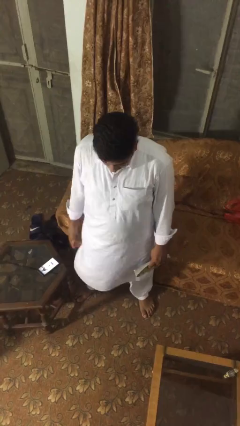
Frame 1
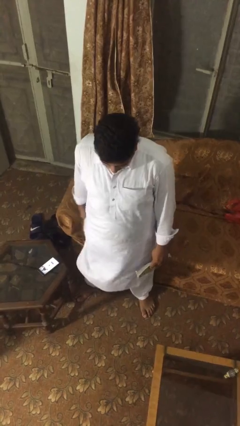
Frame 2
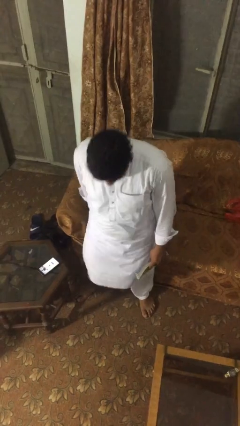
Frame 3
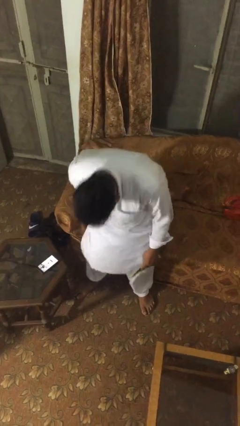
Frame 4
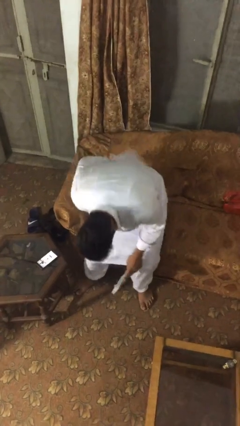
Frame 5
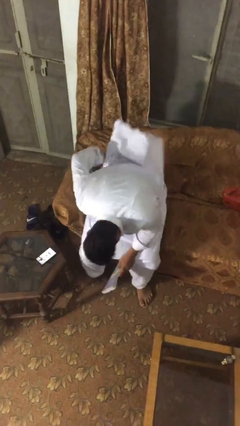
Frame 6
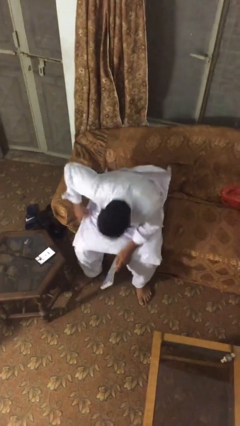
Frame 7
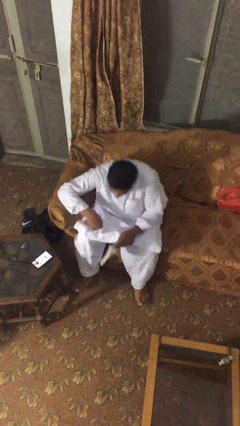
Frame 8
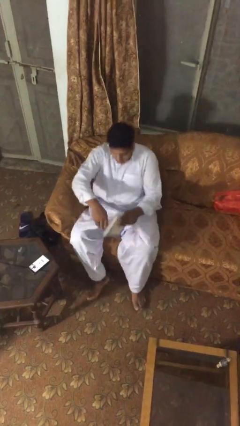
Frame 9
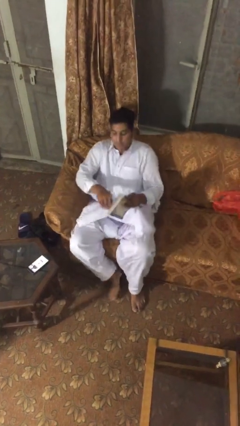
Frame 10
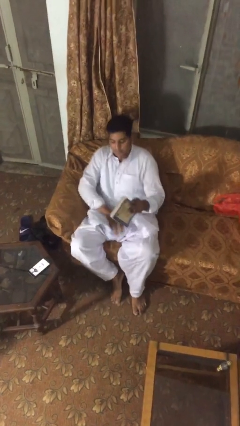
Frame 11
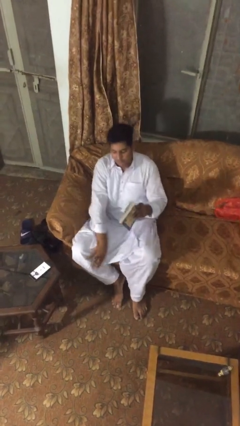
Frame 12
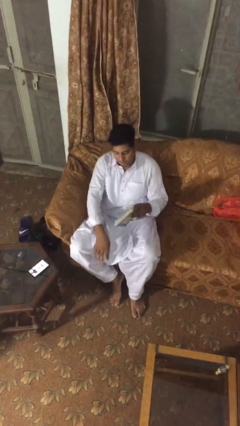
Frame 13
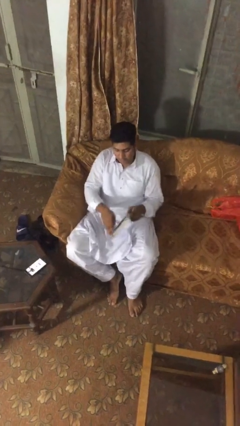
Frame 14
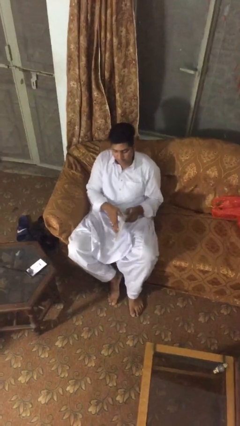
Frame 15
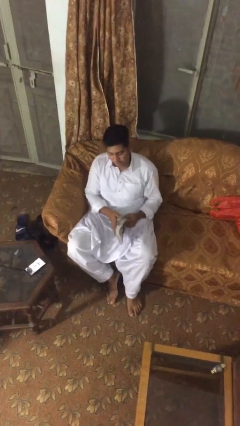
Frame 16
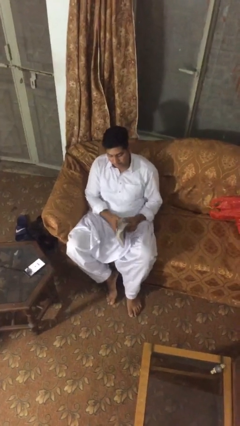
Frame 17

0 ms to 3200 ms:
person sits down

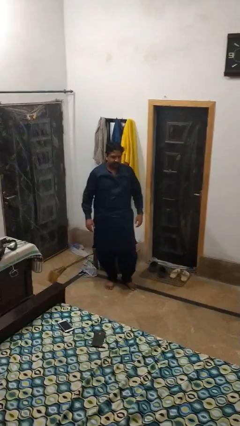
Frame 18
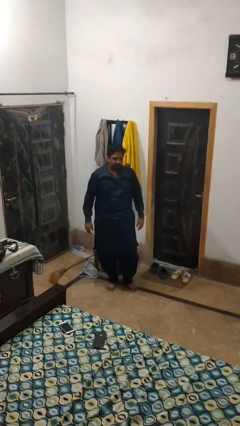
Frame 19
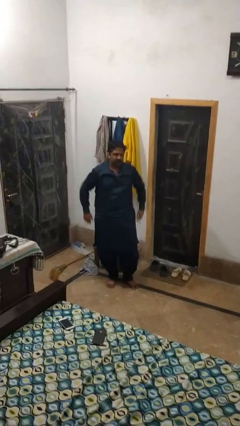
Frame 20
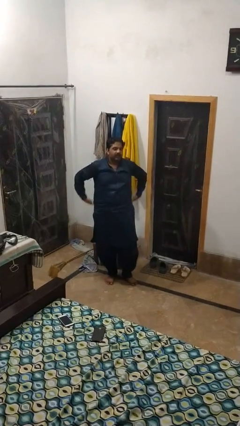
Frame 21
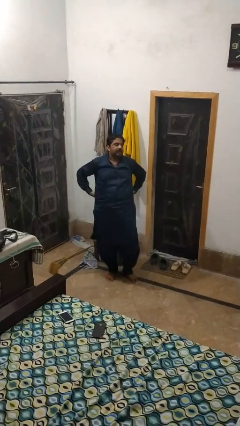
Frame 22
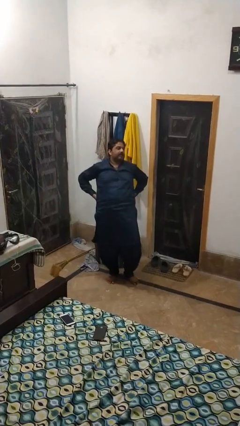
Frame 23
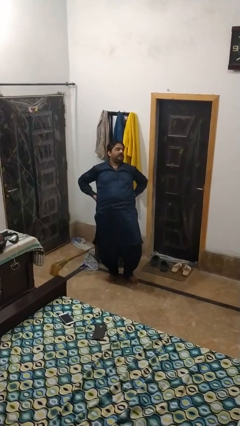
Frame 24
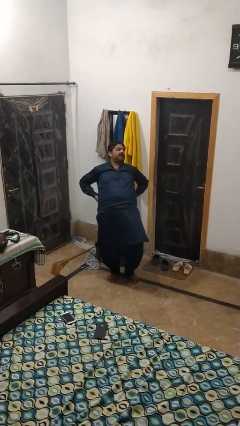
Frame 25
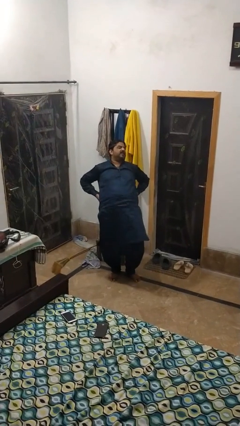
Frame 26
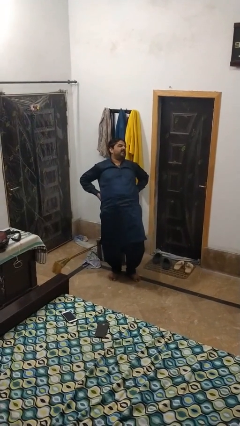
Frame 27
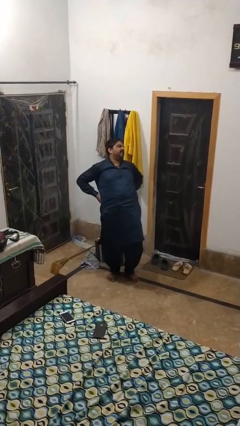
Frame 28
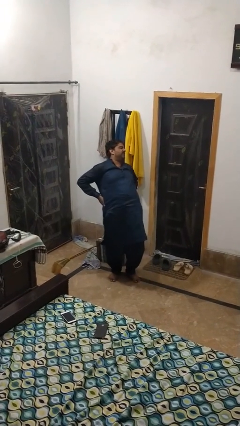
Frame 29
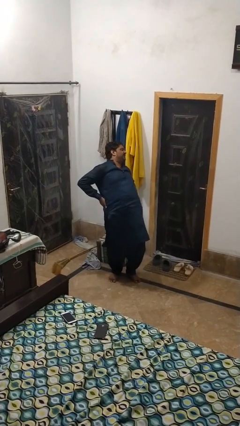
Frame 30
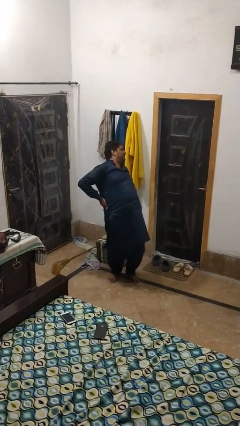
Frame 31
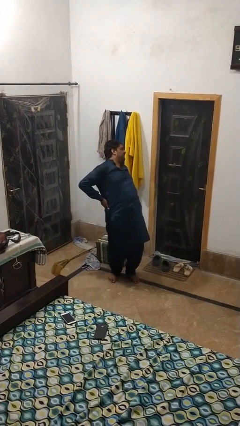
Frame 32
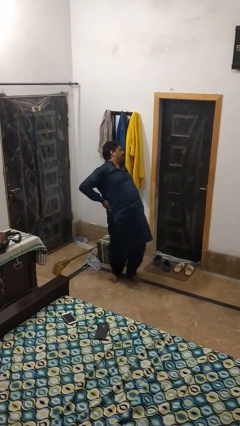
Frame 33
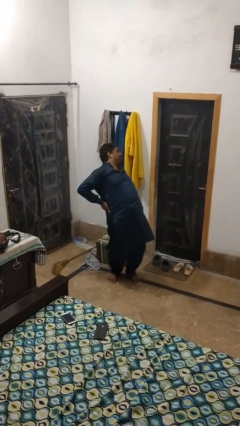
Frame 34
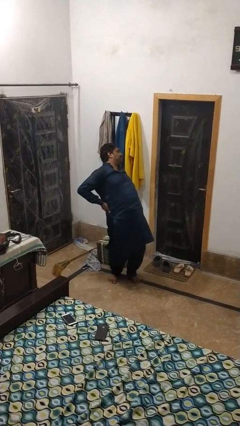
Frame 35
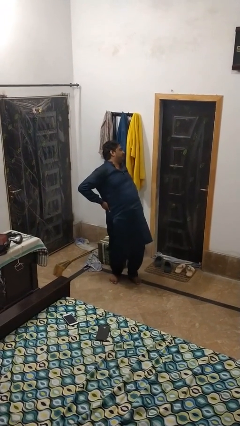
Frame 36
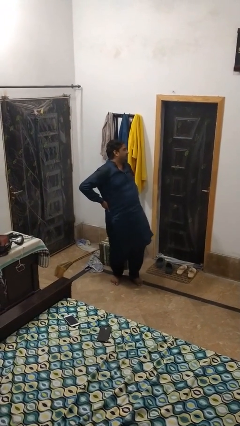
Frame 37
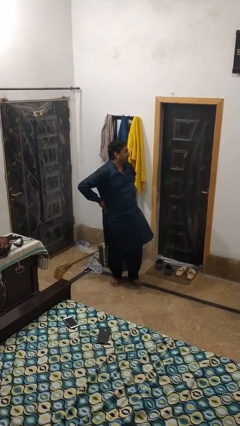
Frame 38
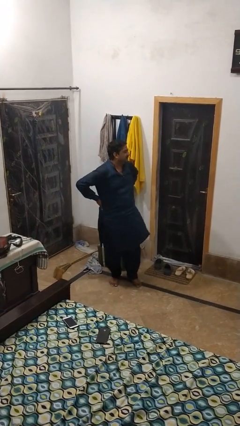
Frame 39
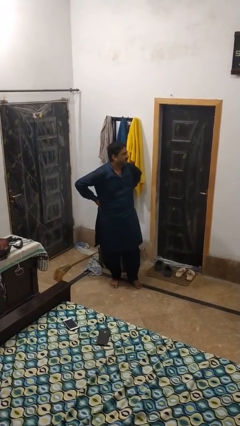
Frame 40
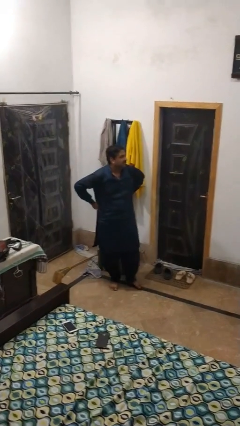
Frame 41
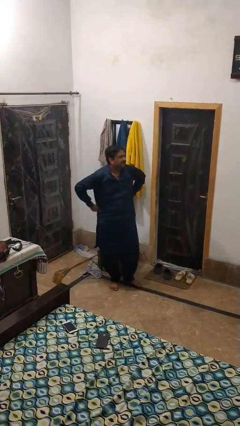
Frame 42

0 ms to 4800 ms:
person stretches back

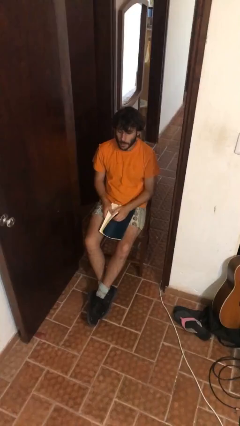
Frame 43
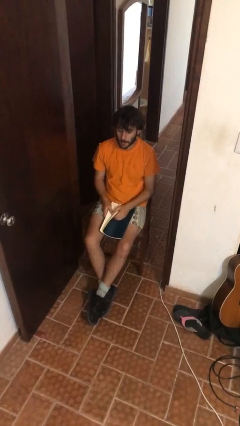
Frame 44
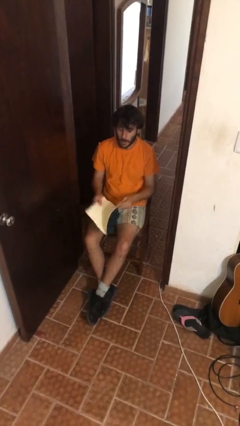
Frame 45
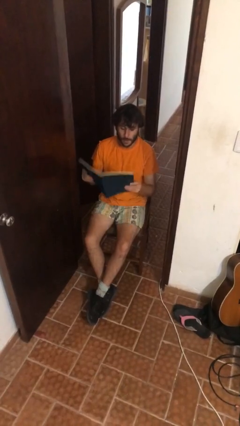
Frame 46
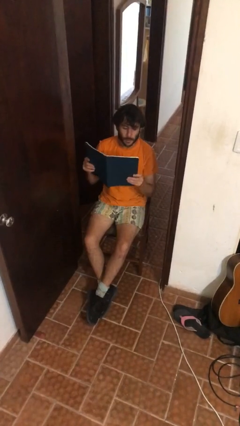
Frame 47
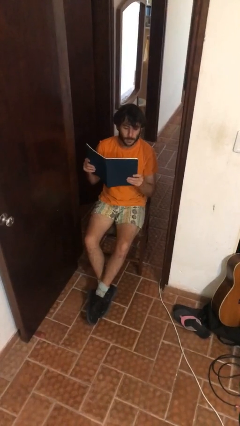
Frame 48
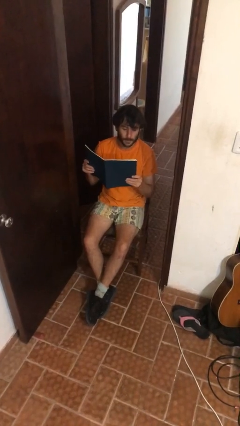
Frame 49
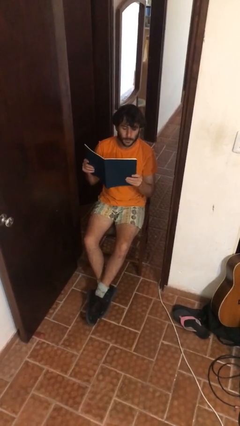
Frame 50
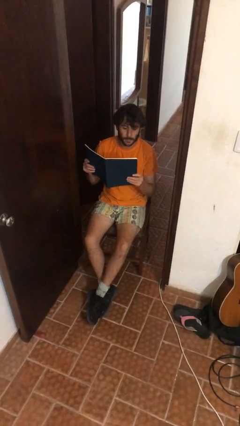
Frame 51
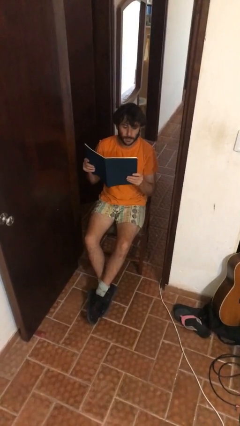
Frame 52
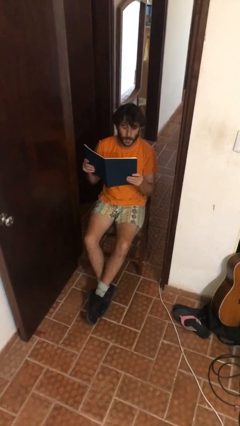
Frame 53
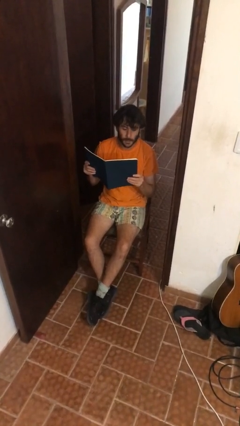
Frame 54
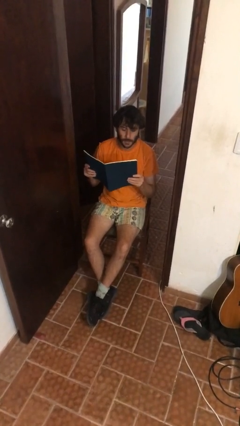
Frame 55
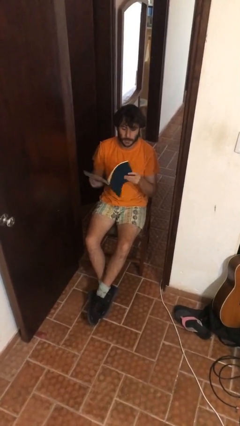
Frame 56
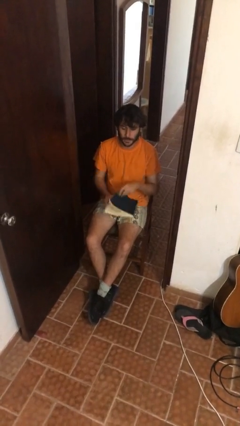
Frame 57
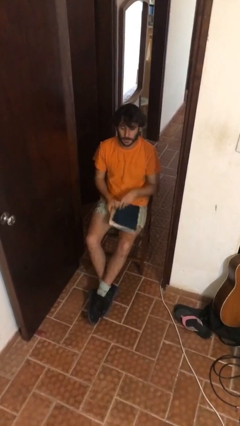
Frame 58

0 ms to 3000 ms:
person reads document

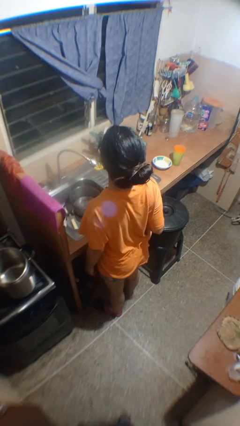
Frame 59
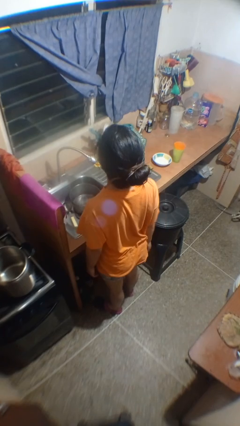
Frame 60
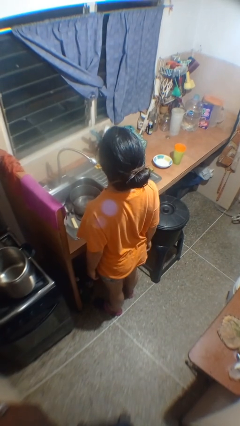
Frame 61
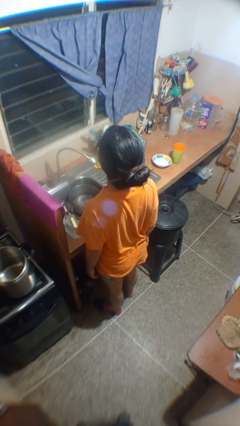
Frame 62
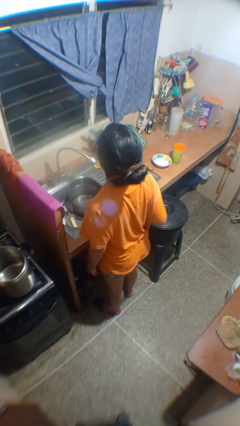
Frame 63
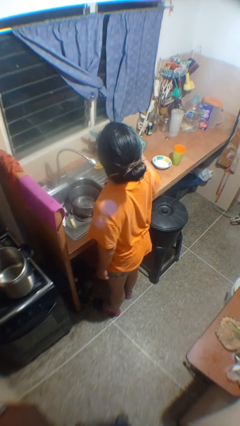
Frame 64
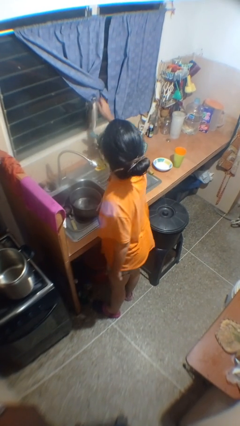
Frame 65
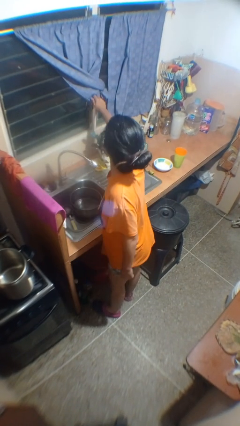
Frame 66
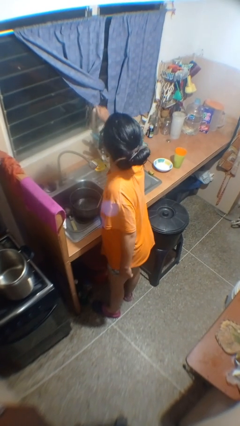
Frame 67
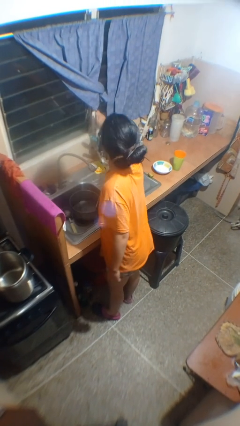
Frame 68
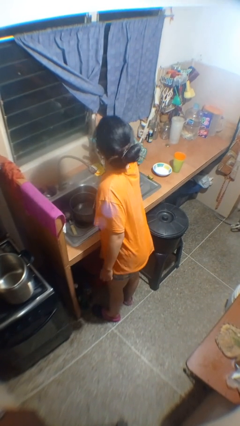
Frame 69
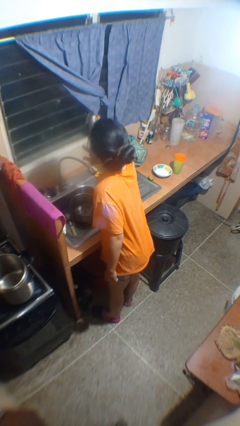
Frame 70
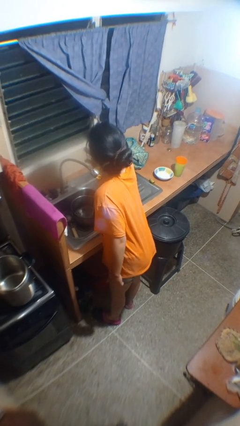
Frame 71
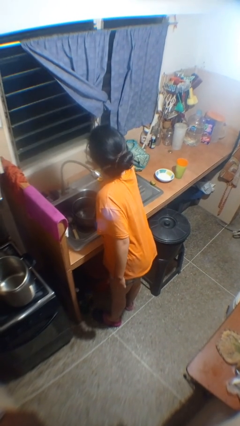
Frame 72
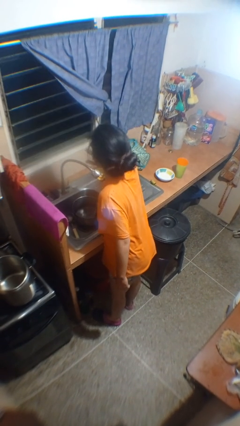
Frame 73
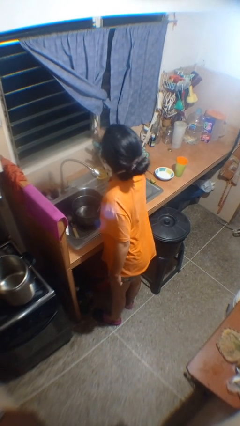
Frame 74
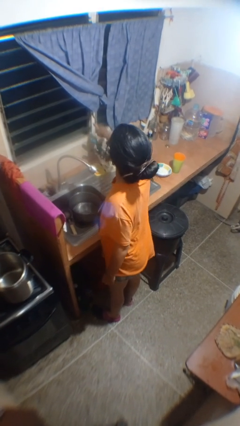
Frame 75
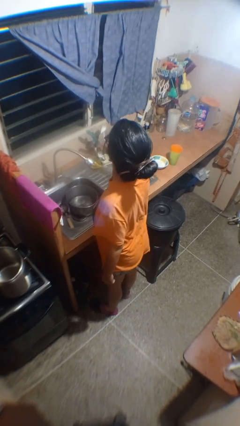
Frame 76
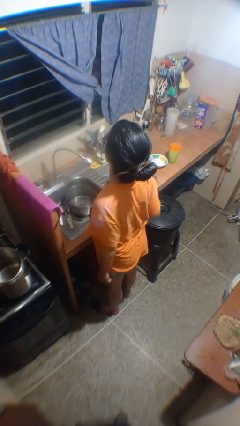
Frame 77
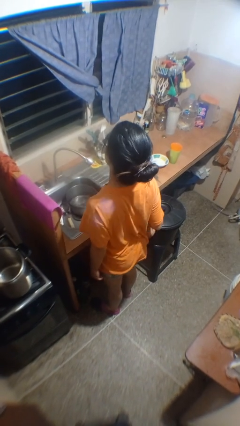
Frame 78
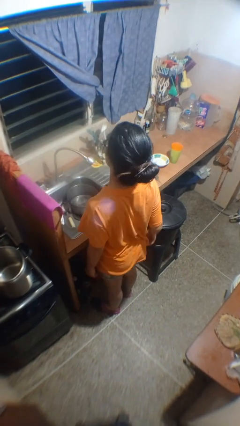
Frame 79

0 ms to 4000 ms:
person opens home window

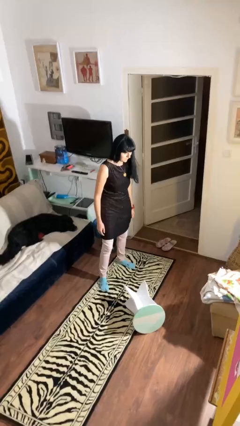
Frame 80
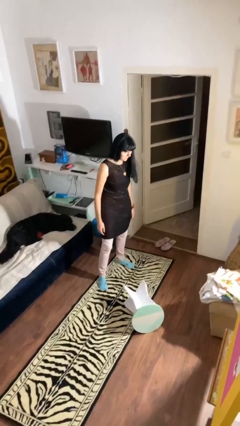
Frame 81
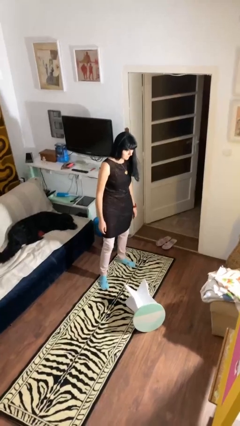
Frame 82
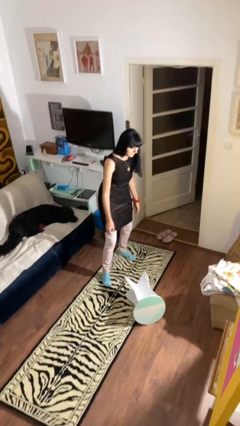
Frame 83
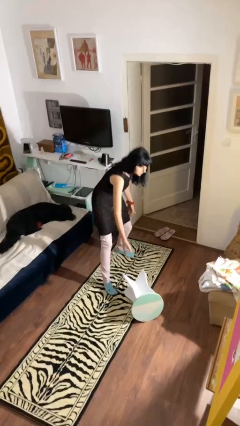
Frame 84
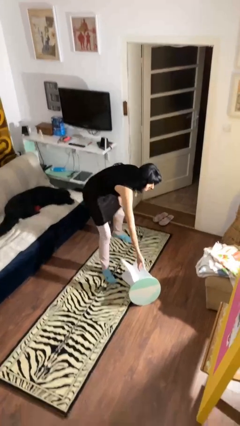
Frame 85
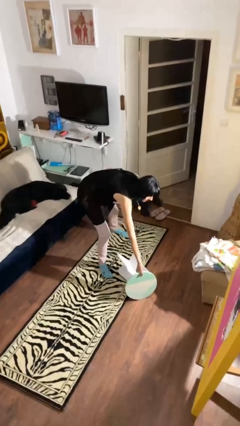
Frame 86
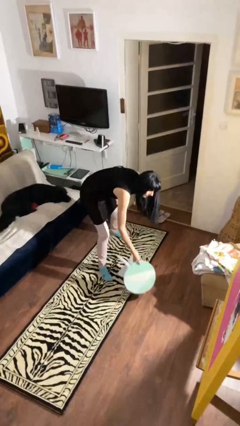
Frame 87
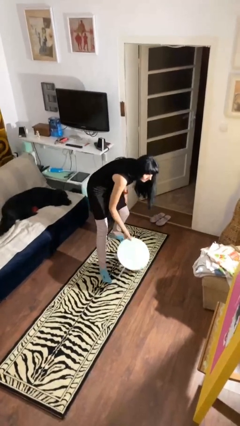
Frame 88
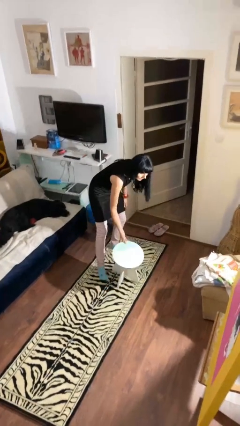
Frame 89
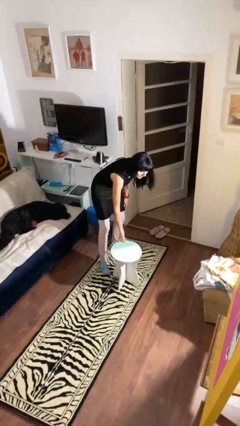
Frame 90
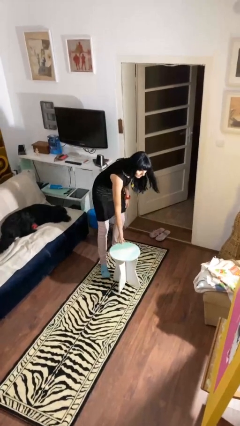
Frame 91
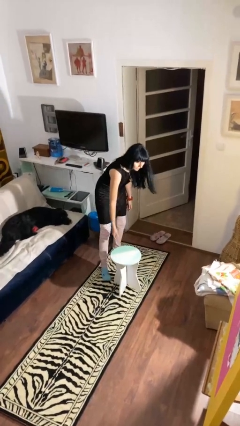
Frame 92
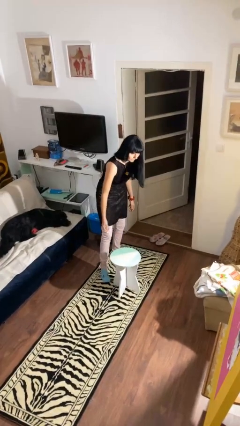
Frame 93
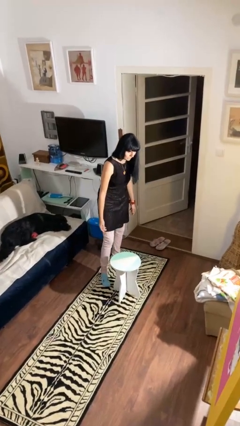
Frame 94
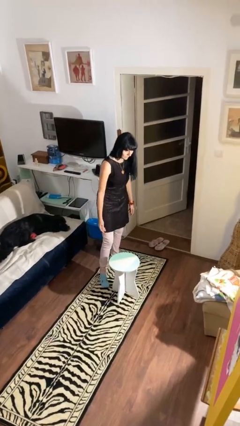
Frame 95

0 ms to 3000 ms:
person sets upright furniture
